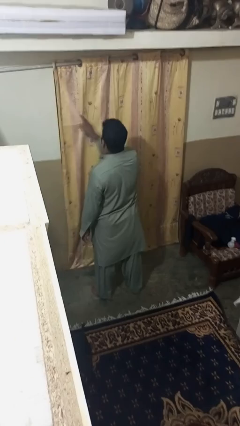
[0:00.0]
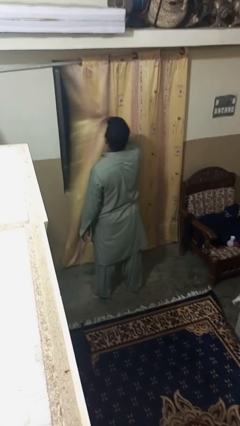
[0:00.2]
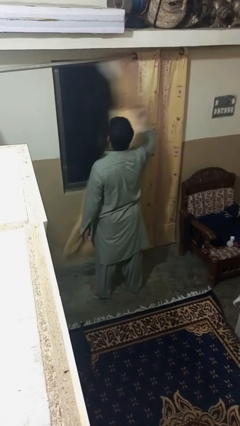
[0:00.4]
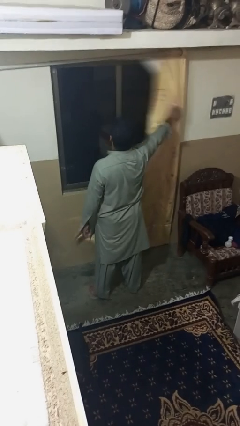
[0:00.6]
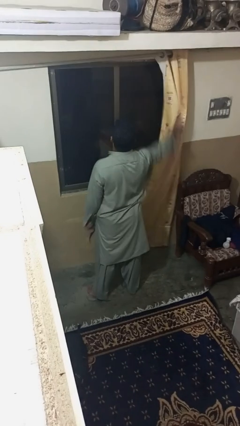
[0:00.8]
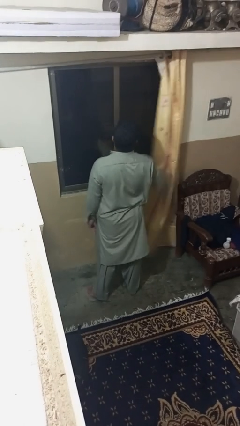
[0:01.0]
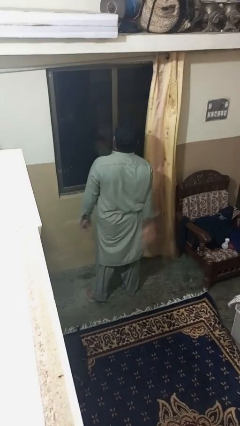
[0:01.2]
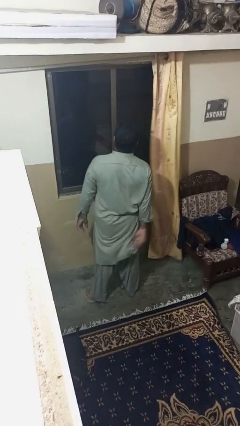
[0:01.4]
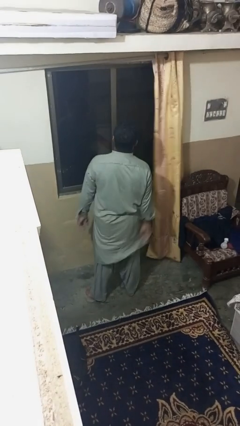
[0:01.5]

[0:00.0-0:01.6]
person opens curtains

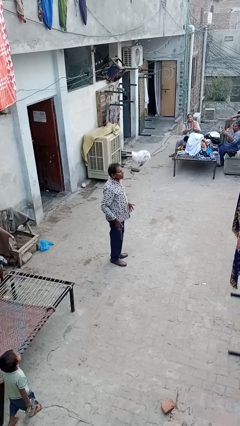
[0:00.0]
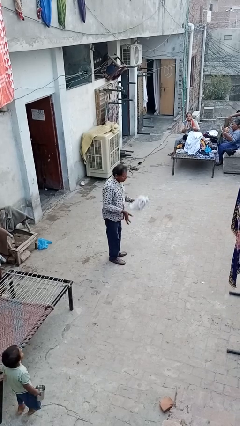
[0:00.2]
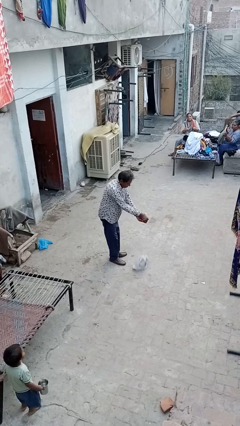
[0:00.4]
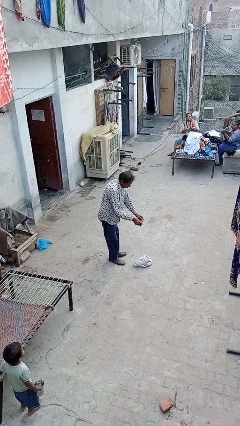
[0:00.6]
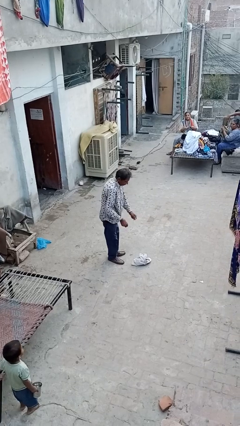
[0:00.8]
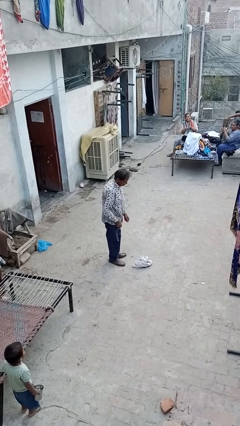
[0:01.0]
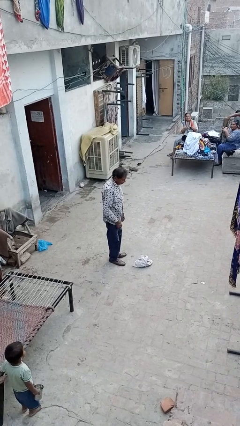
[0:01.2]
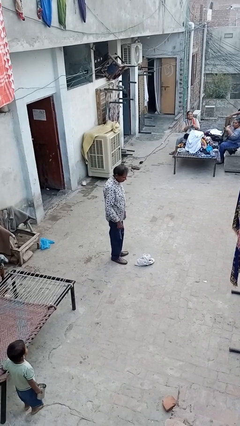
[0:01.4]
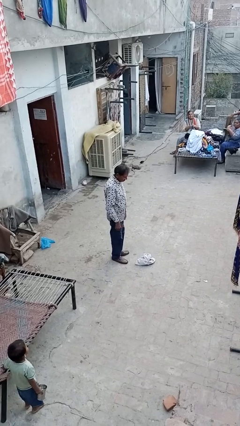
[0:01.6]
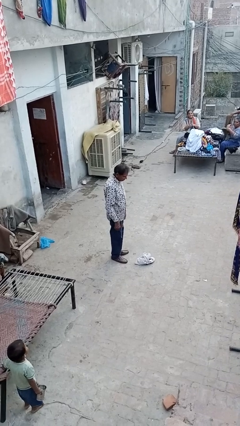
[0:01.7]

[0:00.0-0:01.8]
person catches dropped object

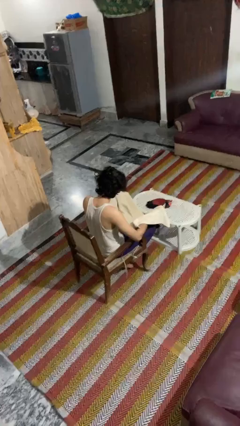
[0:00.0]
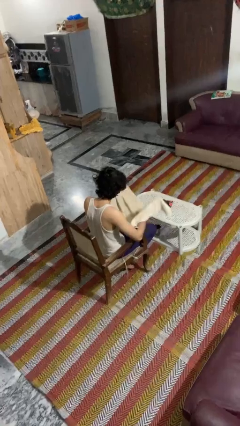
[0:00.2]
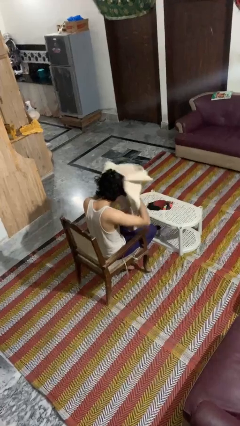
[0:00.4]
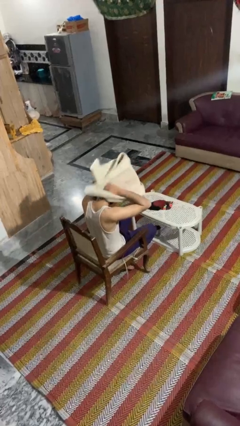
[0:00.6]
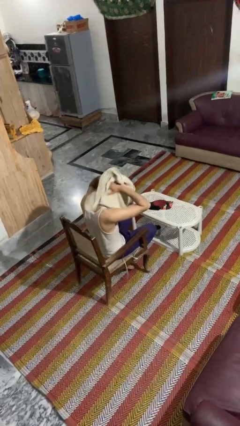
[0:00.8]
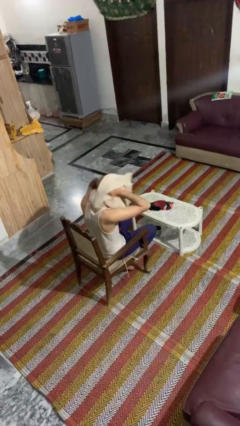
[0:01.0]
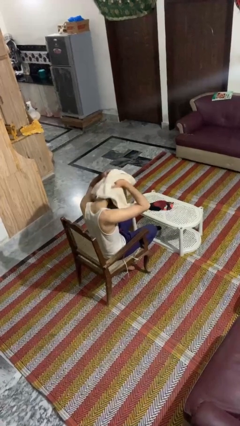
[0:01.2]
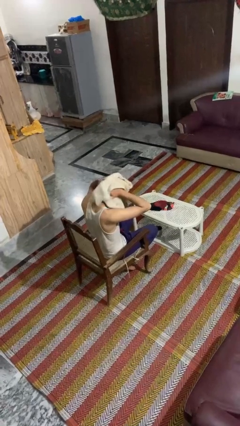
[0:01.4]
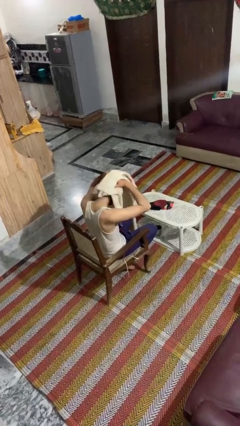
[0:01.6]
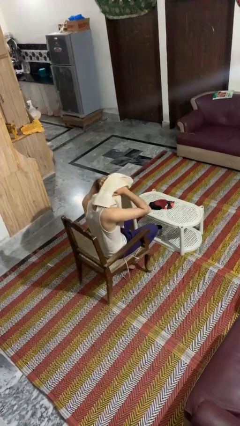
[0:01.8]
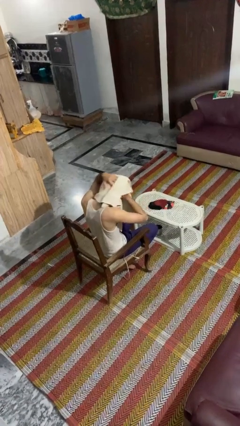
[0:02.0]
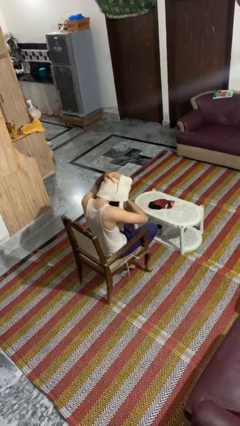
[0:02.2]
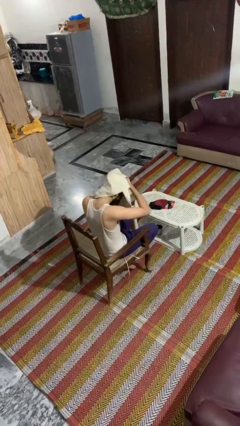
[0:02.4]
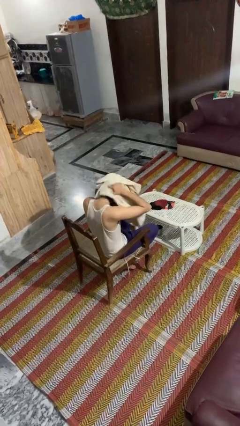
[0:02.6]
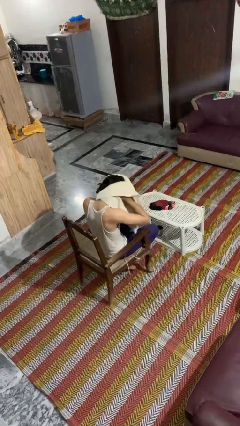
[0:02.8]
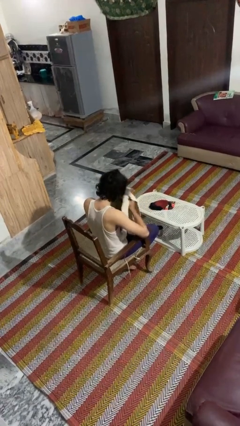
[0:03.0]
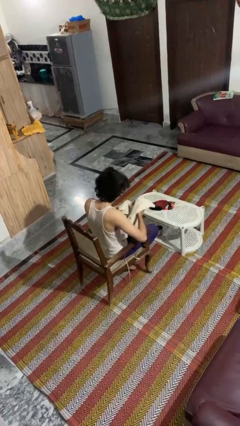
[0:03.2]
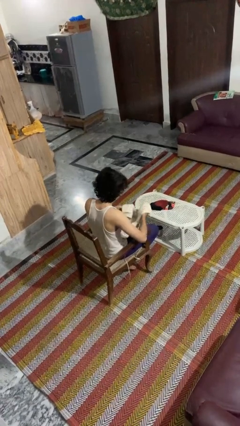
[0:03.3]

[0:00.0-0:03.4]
person dries hair with towel

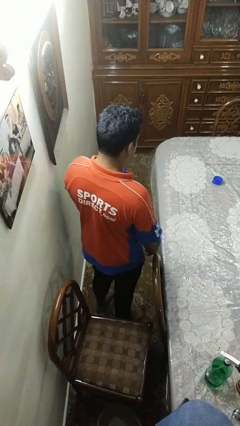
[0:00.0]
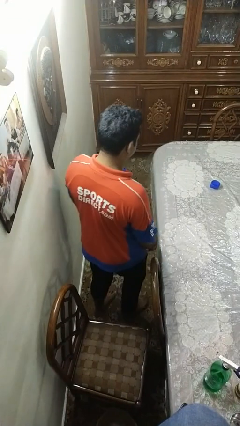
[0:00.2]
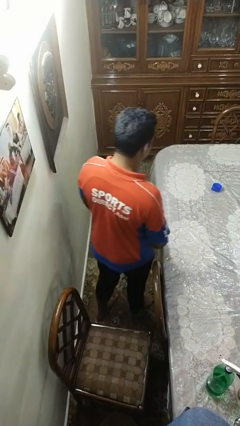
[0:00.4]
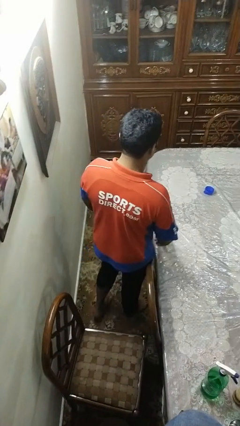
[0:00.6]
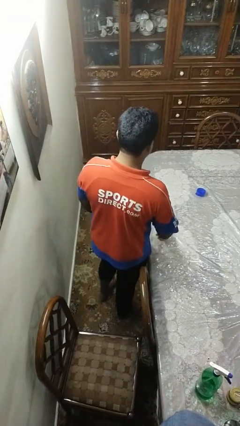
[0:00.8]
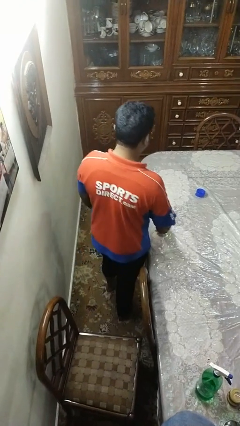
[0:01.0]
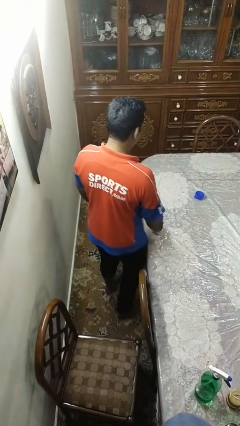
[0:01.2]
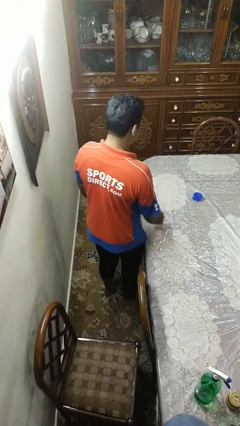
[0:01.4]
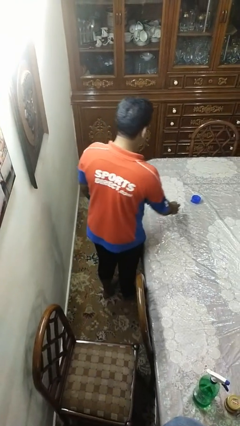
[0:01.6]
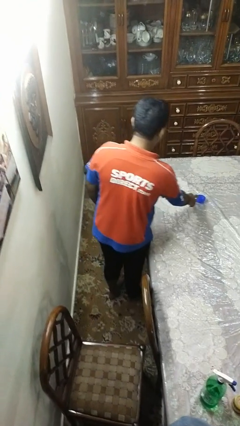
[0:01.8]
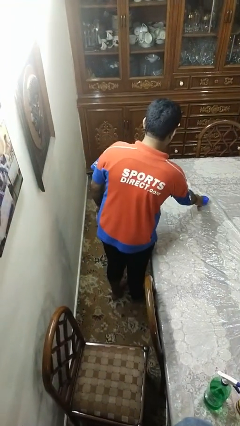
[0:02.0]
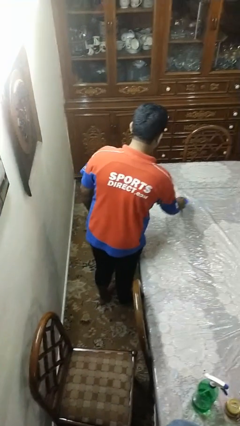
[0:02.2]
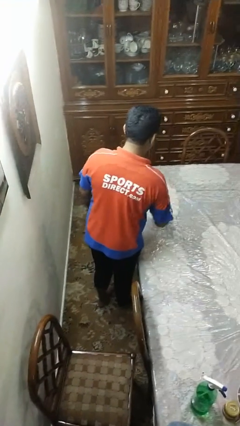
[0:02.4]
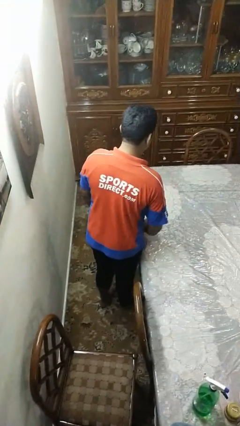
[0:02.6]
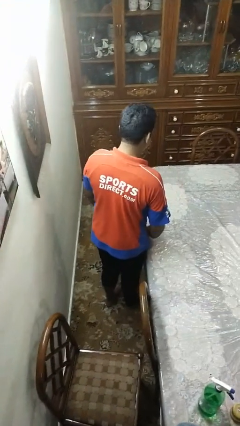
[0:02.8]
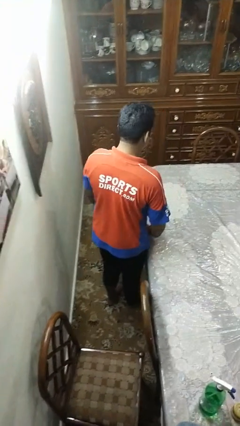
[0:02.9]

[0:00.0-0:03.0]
person picks up object from table

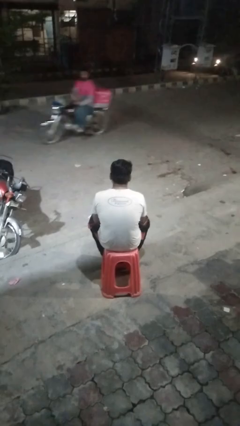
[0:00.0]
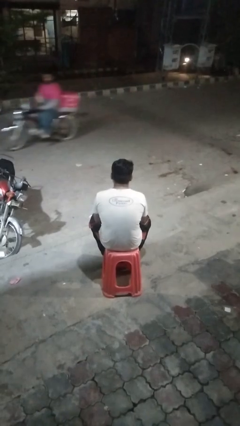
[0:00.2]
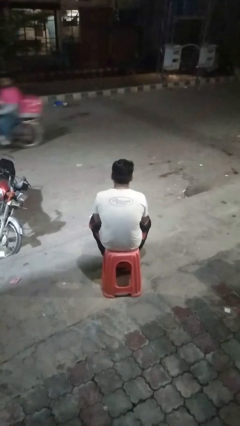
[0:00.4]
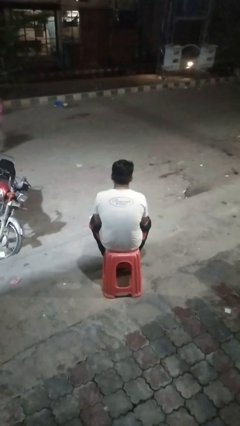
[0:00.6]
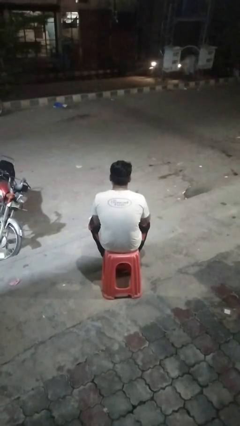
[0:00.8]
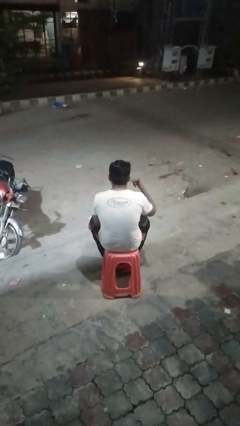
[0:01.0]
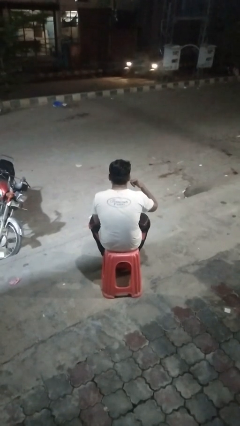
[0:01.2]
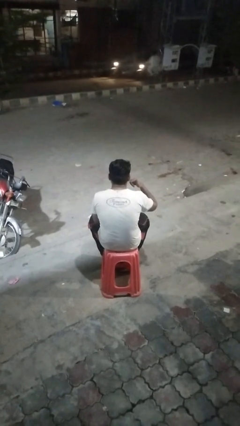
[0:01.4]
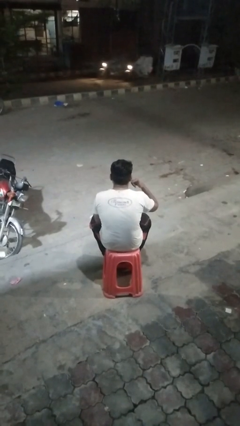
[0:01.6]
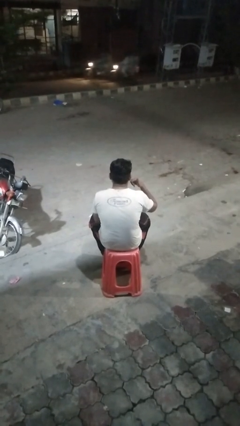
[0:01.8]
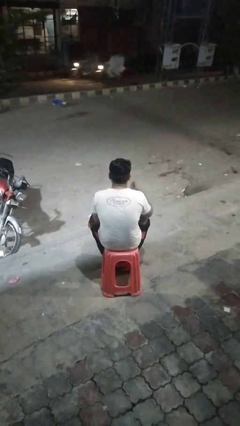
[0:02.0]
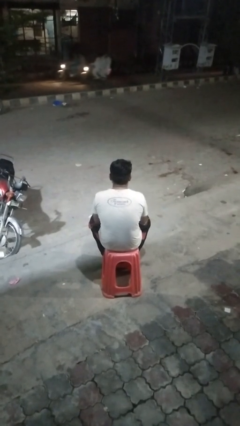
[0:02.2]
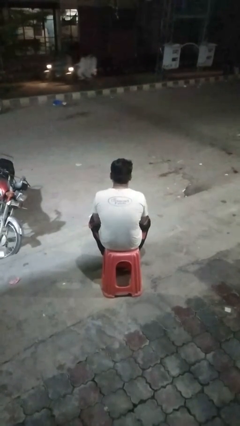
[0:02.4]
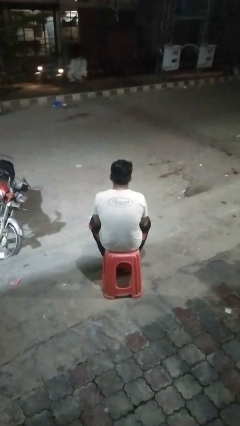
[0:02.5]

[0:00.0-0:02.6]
person gestures call me

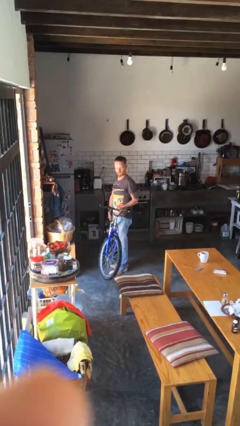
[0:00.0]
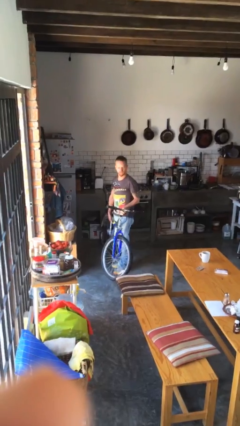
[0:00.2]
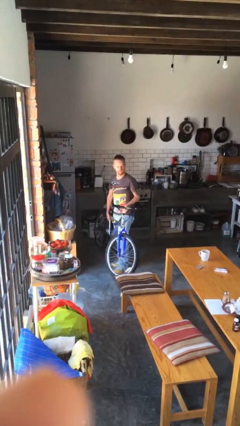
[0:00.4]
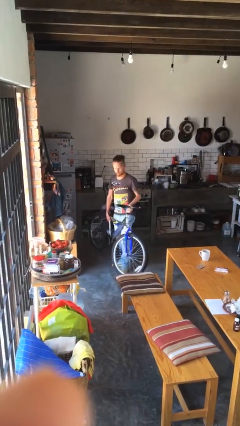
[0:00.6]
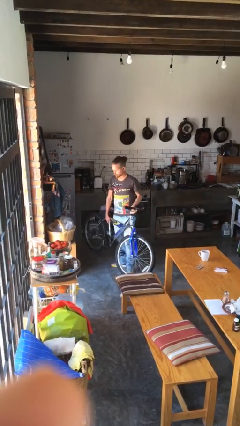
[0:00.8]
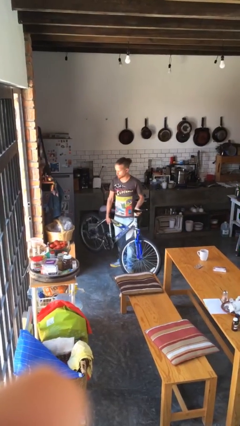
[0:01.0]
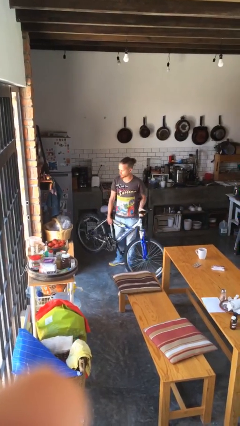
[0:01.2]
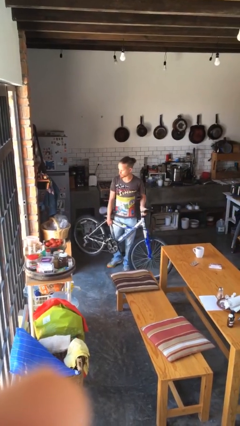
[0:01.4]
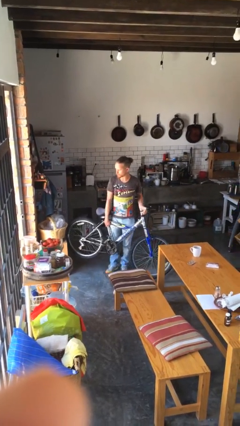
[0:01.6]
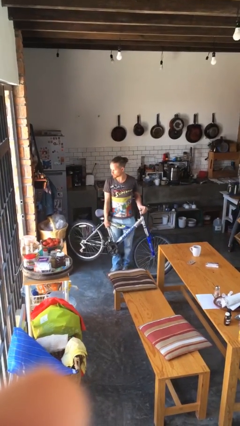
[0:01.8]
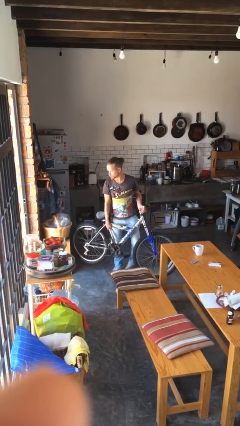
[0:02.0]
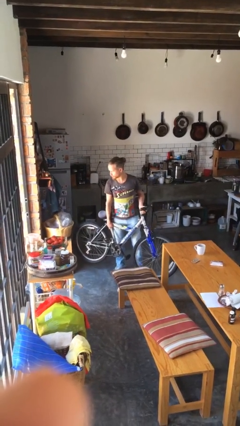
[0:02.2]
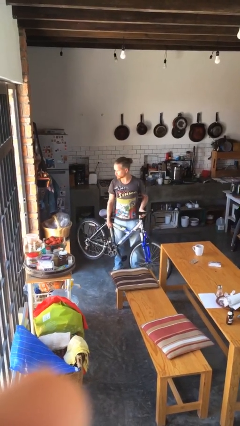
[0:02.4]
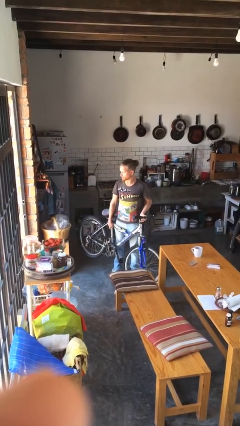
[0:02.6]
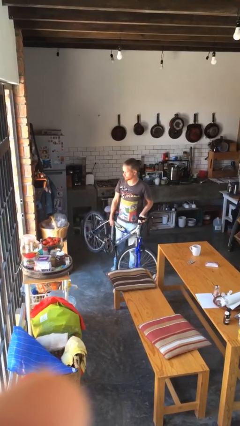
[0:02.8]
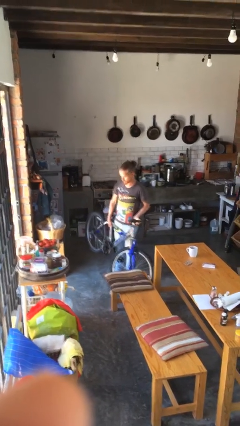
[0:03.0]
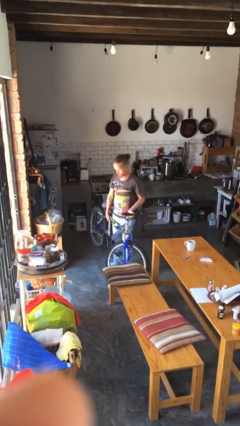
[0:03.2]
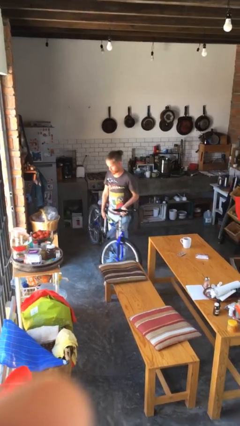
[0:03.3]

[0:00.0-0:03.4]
person carries bicycle

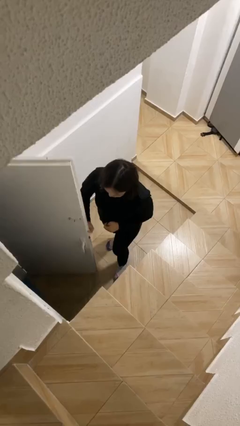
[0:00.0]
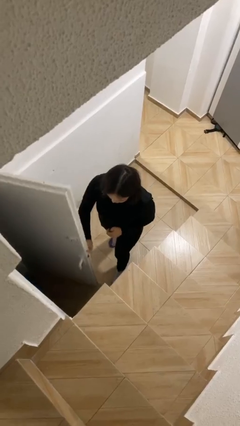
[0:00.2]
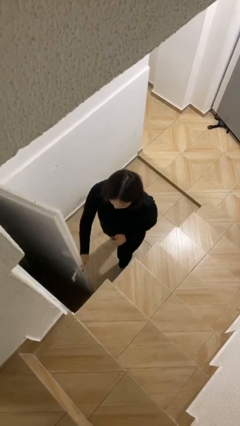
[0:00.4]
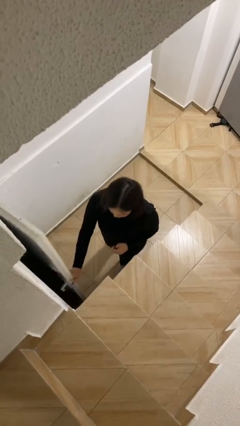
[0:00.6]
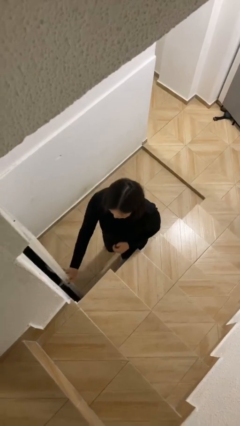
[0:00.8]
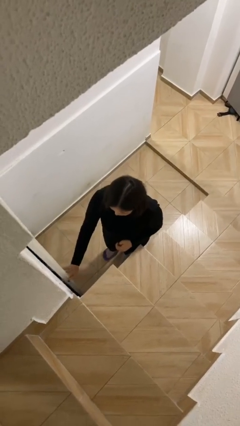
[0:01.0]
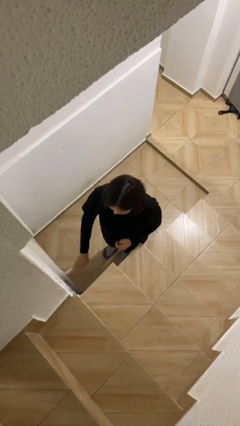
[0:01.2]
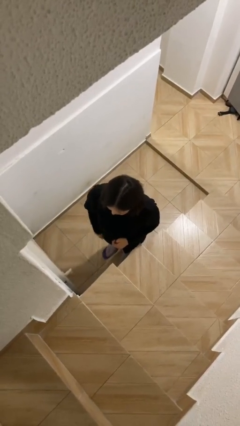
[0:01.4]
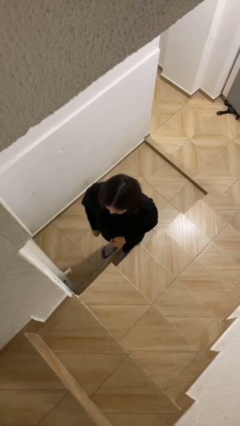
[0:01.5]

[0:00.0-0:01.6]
person closes facility door
